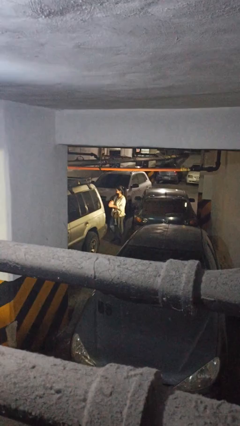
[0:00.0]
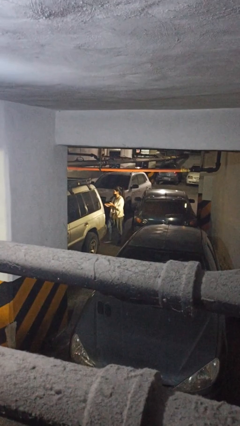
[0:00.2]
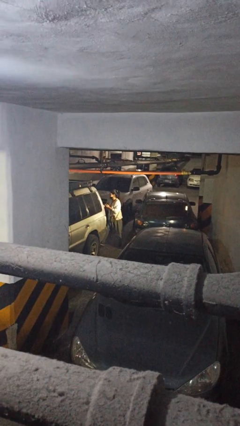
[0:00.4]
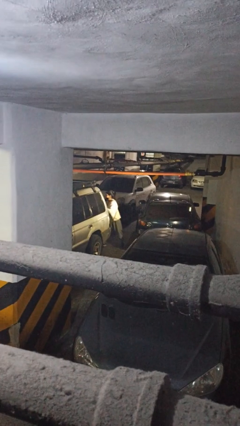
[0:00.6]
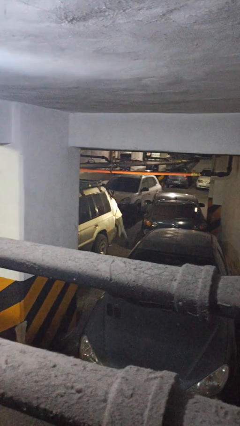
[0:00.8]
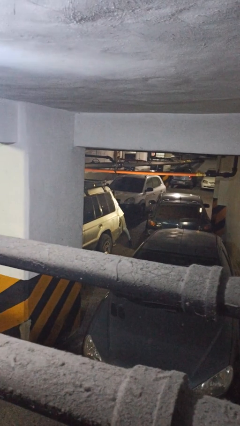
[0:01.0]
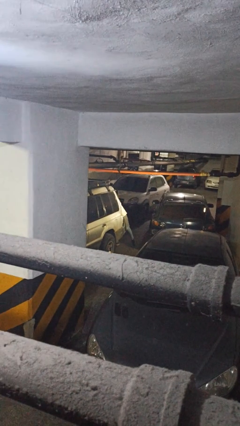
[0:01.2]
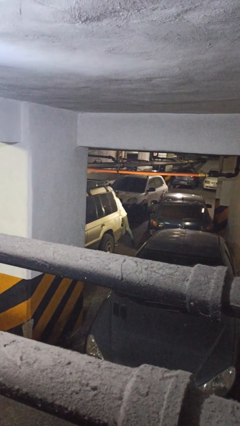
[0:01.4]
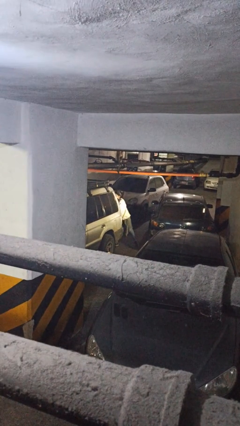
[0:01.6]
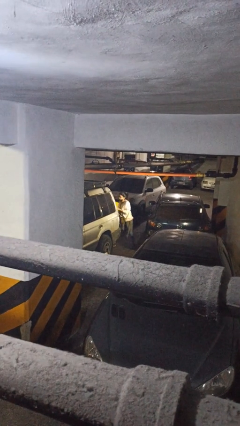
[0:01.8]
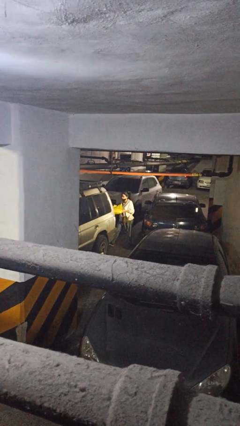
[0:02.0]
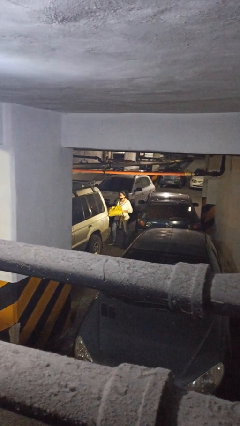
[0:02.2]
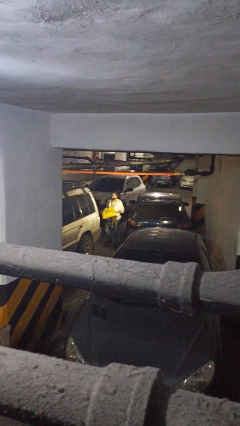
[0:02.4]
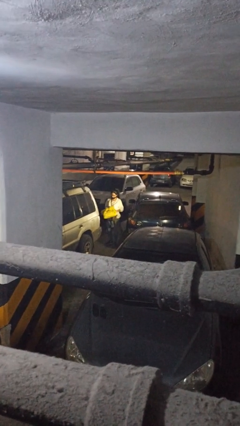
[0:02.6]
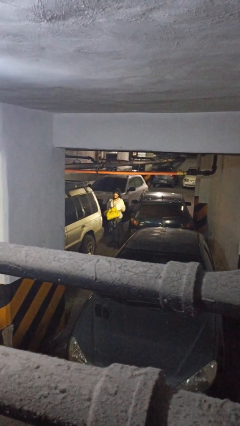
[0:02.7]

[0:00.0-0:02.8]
person unloads car

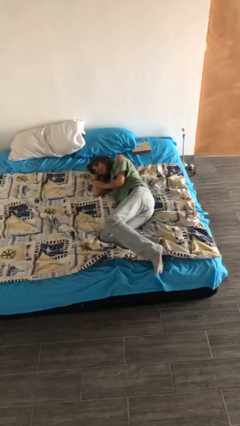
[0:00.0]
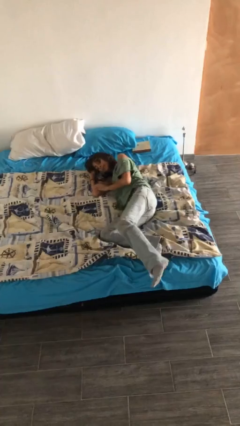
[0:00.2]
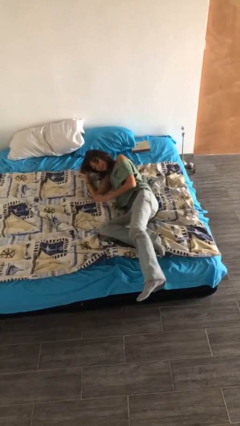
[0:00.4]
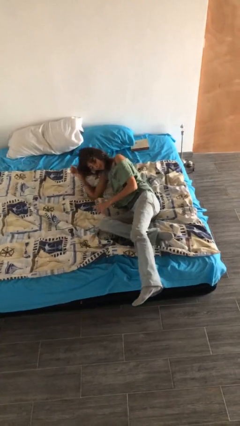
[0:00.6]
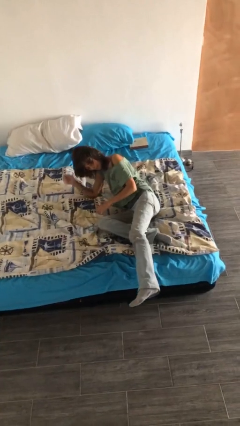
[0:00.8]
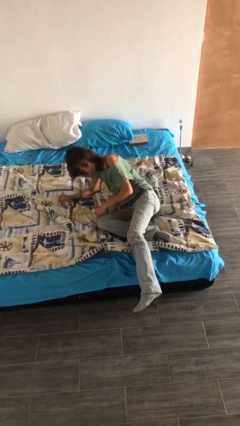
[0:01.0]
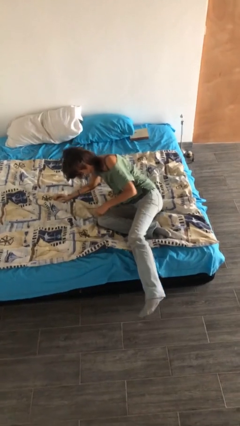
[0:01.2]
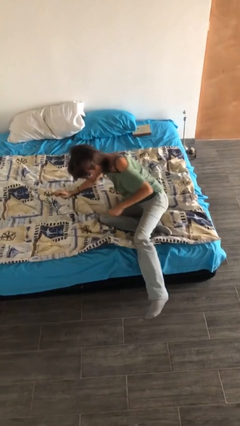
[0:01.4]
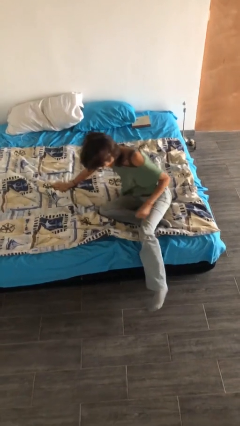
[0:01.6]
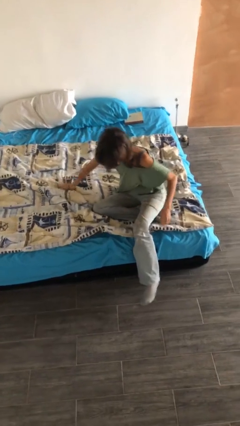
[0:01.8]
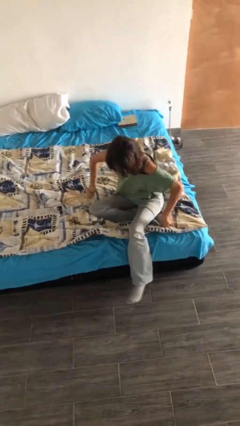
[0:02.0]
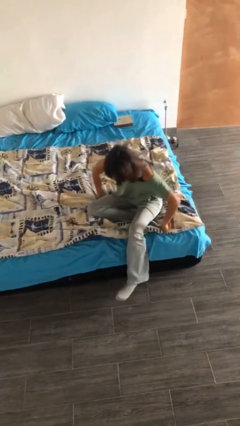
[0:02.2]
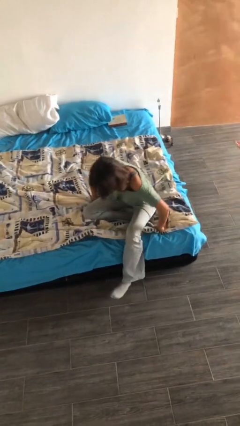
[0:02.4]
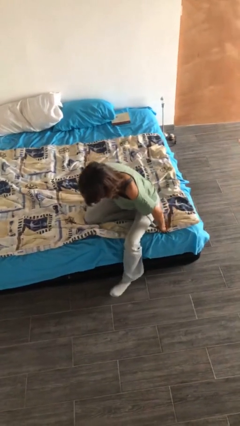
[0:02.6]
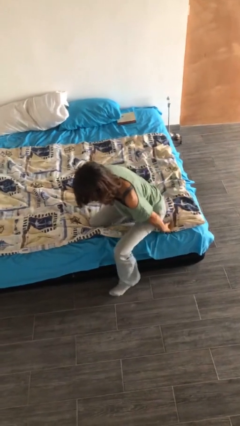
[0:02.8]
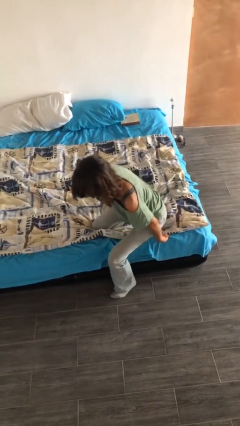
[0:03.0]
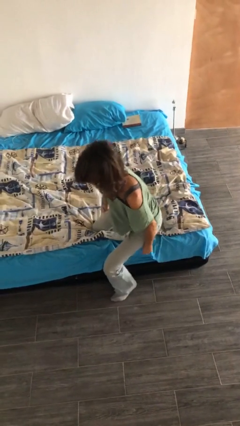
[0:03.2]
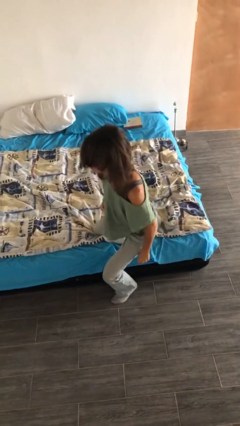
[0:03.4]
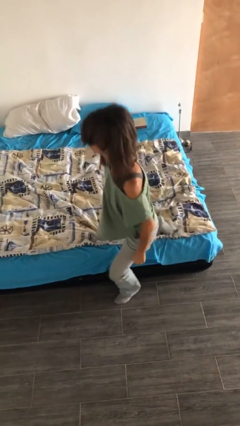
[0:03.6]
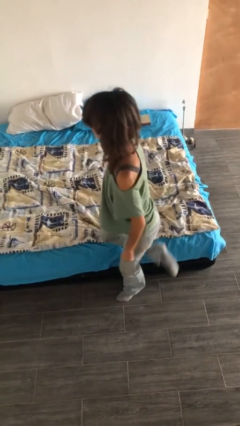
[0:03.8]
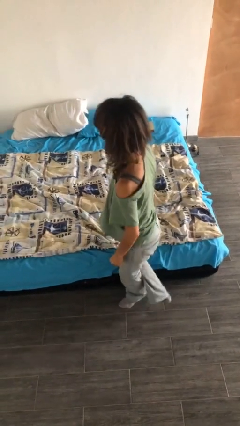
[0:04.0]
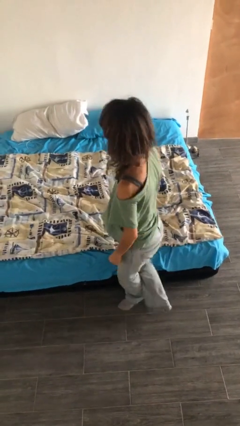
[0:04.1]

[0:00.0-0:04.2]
person stands up

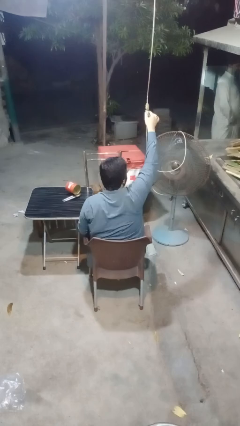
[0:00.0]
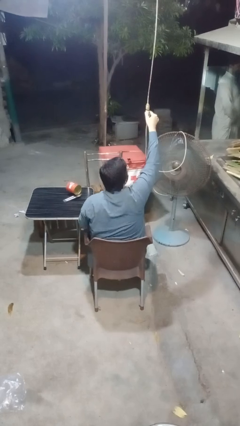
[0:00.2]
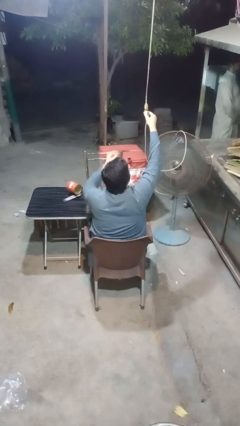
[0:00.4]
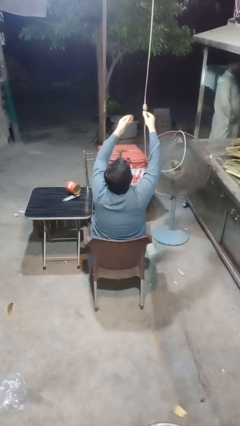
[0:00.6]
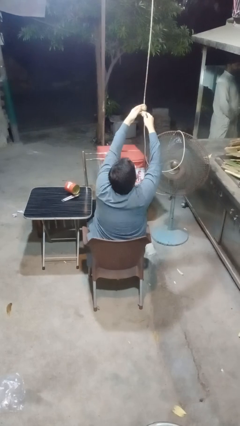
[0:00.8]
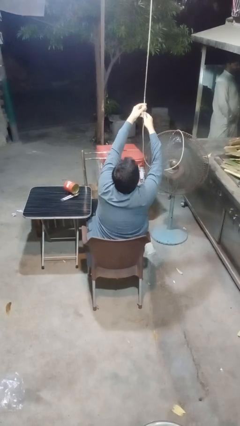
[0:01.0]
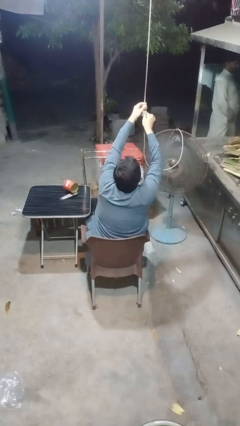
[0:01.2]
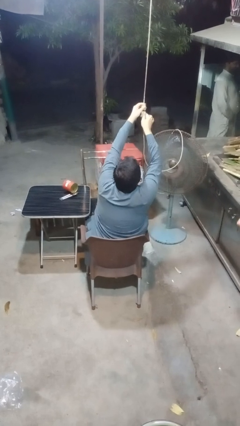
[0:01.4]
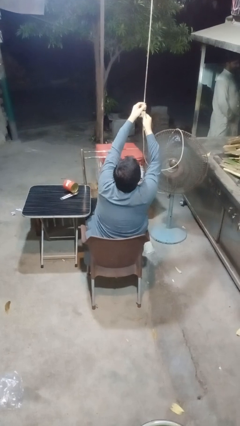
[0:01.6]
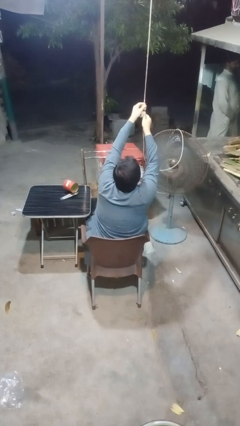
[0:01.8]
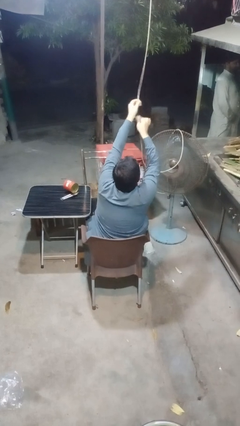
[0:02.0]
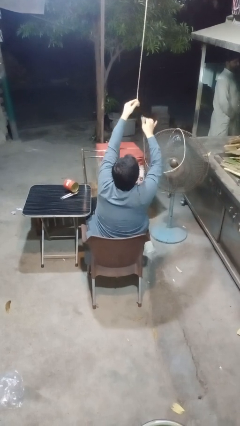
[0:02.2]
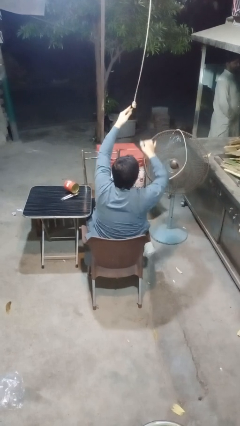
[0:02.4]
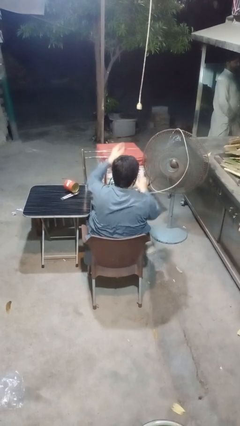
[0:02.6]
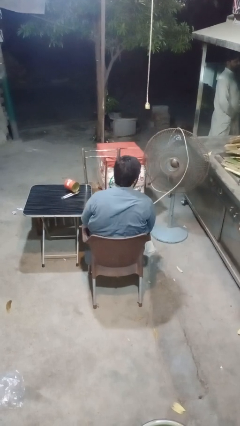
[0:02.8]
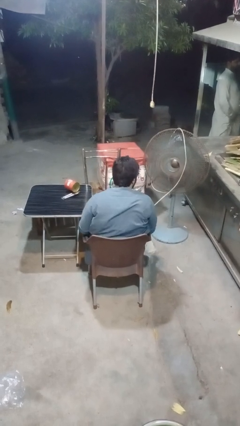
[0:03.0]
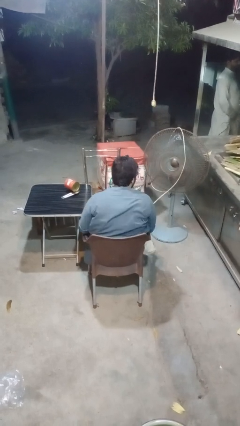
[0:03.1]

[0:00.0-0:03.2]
person turns off fan

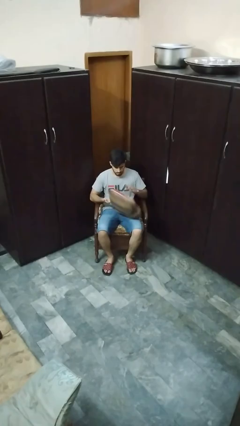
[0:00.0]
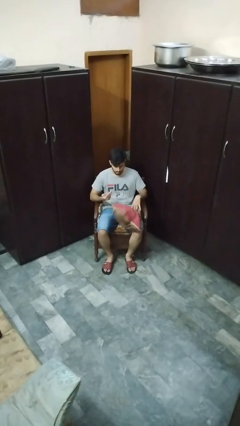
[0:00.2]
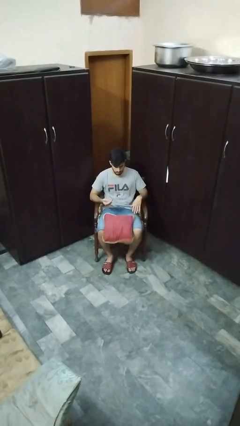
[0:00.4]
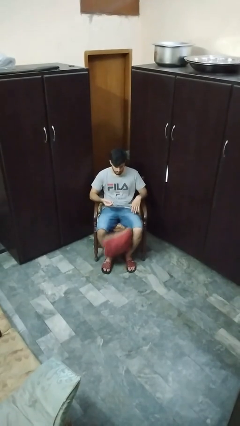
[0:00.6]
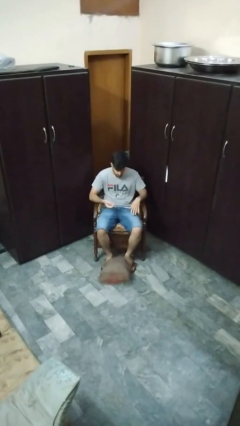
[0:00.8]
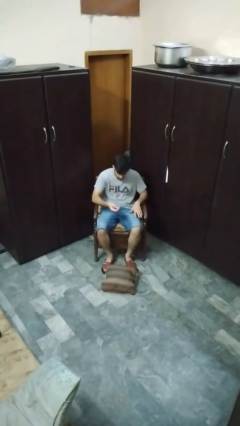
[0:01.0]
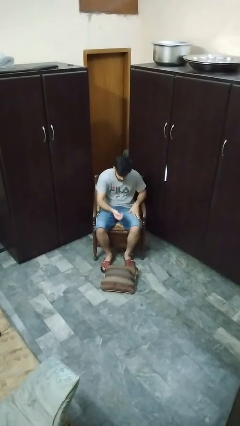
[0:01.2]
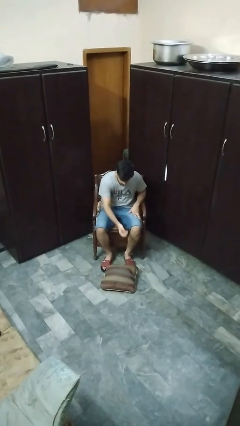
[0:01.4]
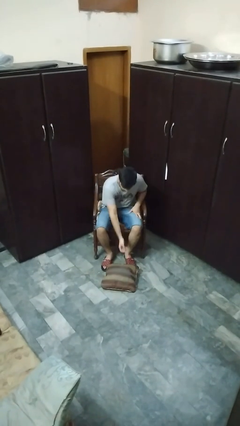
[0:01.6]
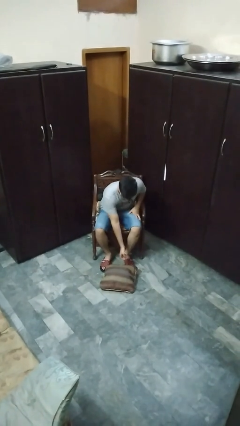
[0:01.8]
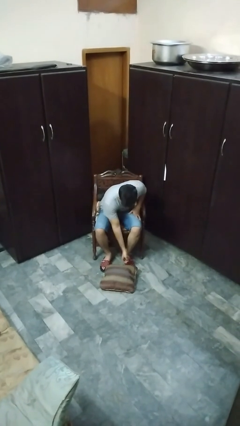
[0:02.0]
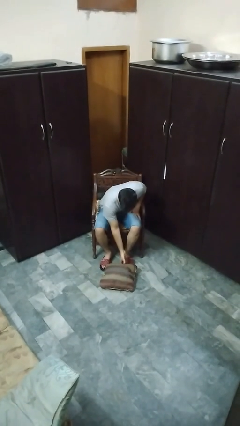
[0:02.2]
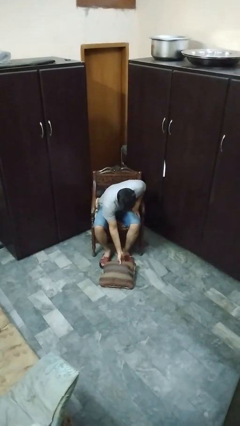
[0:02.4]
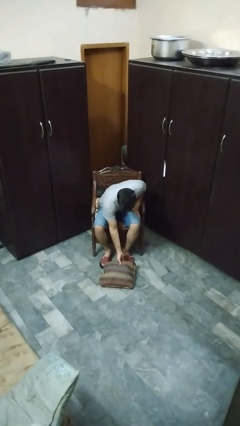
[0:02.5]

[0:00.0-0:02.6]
person drops object

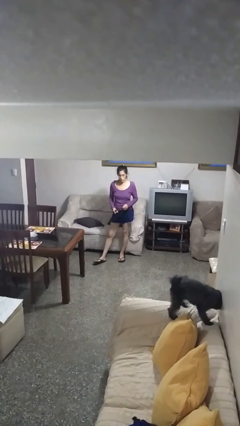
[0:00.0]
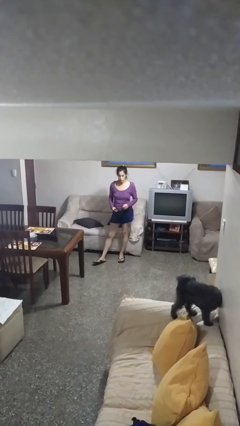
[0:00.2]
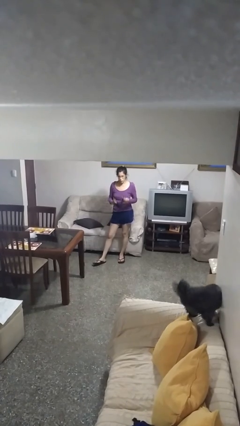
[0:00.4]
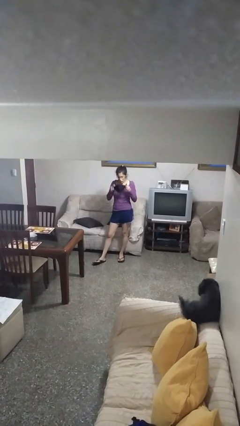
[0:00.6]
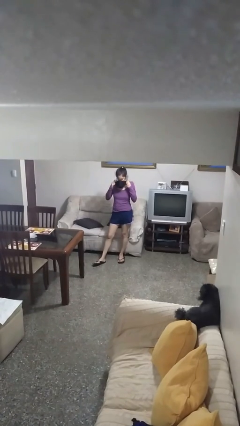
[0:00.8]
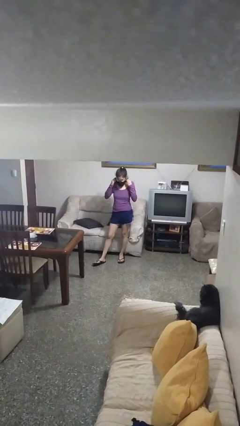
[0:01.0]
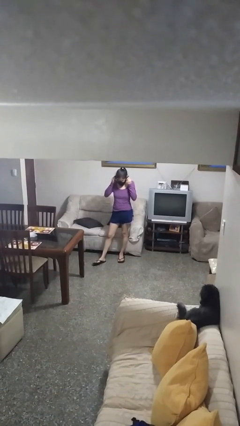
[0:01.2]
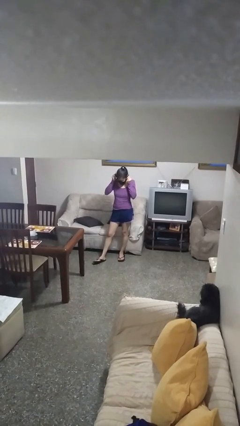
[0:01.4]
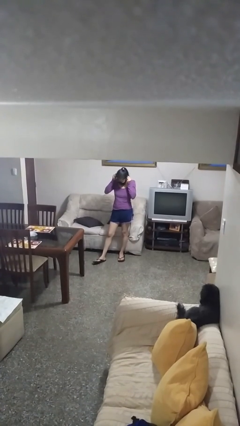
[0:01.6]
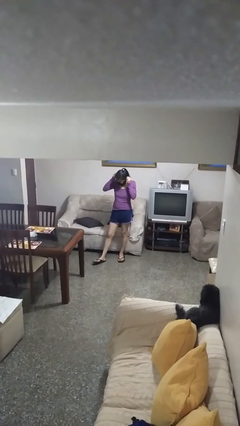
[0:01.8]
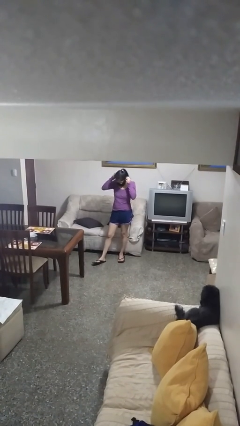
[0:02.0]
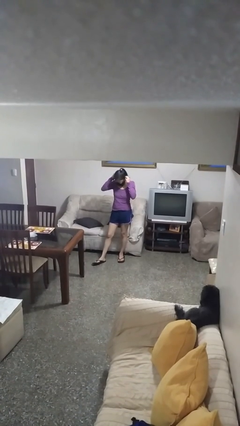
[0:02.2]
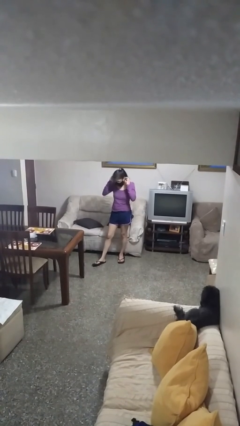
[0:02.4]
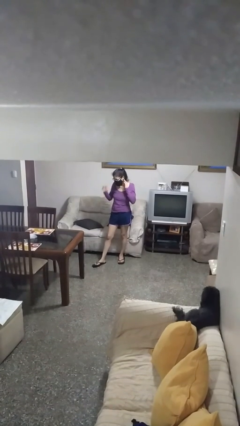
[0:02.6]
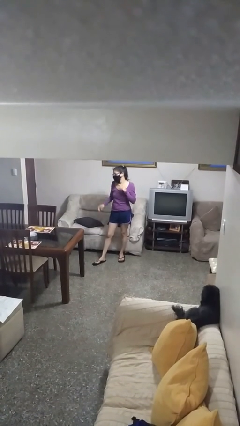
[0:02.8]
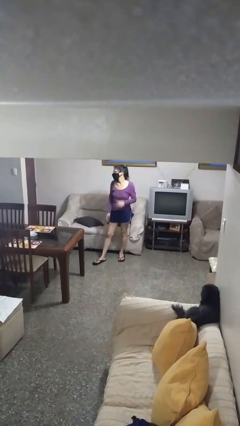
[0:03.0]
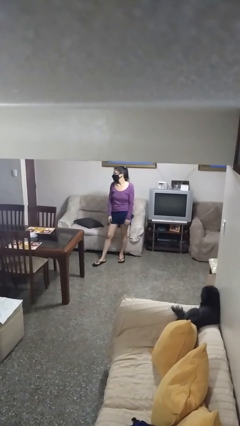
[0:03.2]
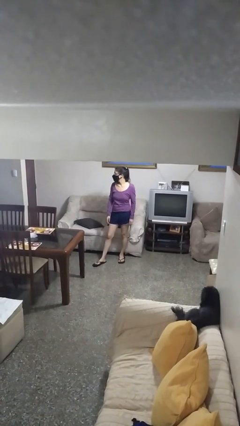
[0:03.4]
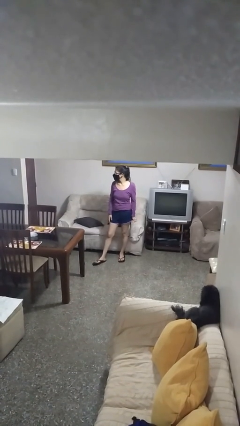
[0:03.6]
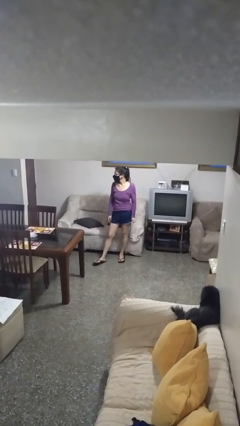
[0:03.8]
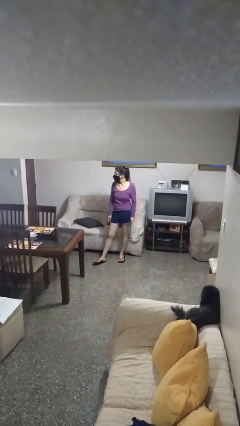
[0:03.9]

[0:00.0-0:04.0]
person puts on facemask

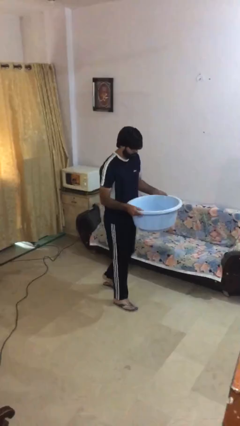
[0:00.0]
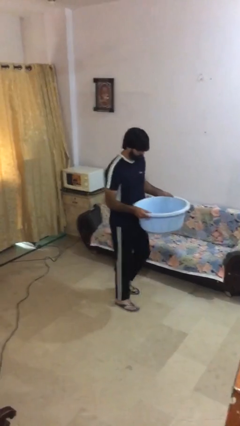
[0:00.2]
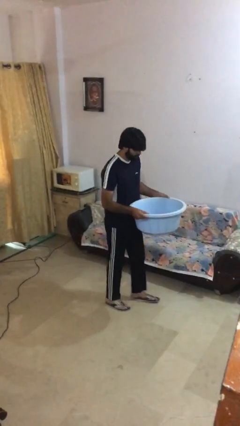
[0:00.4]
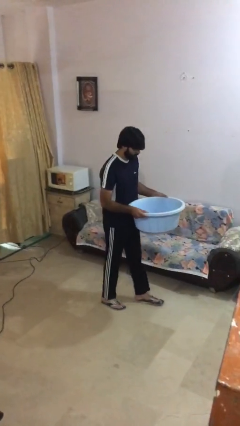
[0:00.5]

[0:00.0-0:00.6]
person puts down object on floor
